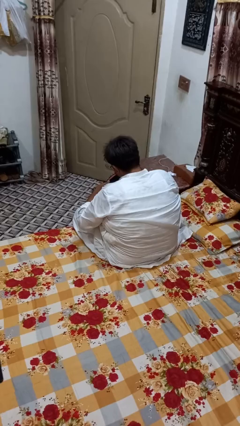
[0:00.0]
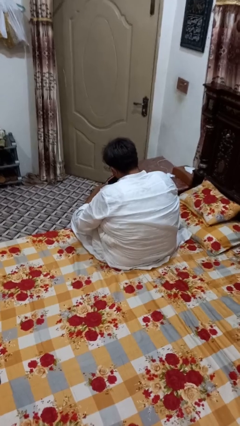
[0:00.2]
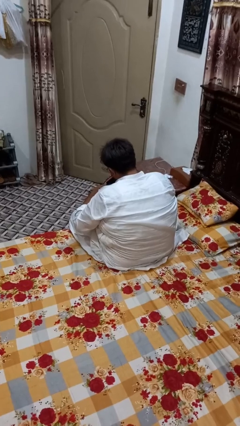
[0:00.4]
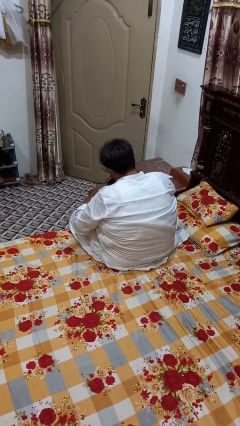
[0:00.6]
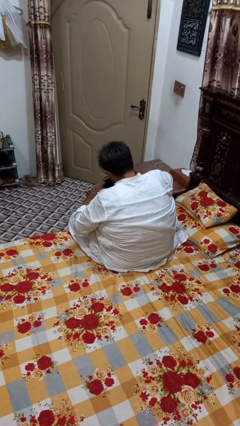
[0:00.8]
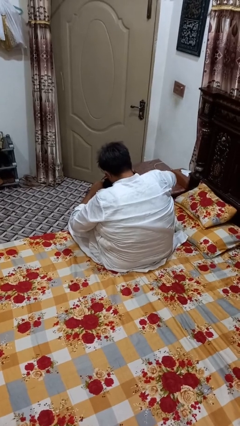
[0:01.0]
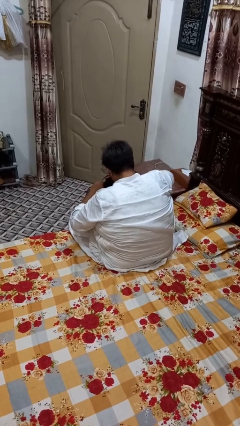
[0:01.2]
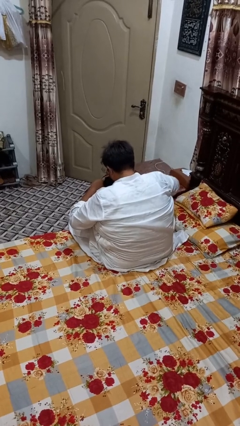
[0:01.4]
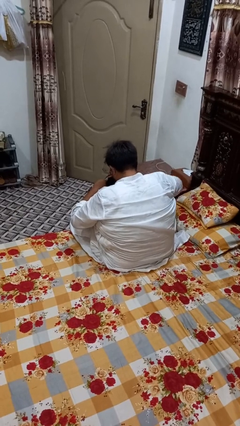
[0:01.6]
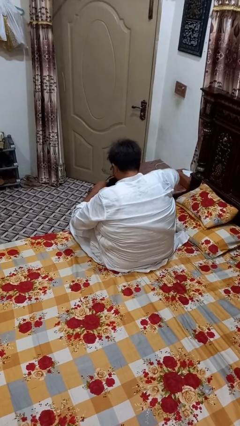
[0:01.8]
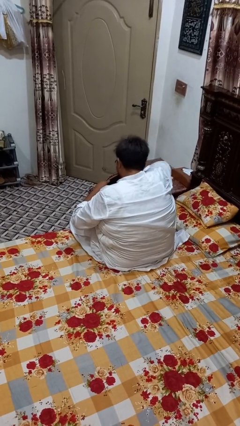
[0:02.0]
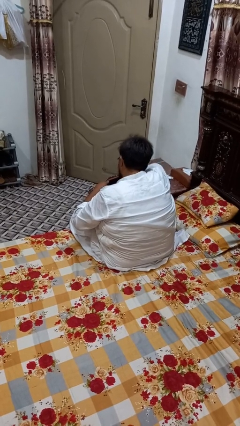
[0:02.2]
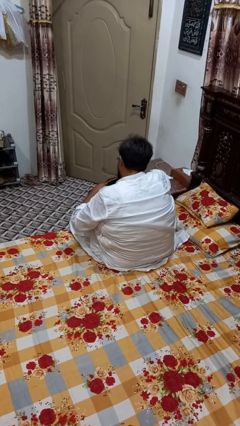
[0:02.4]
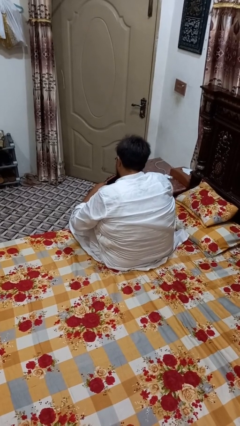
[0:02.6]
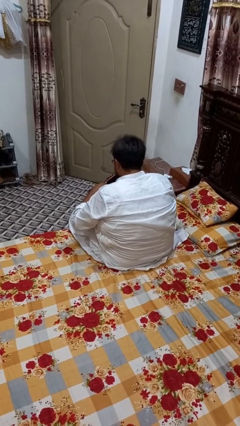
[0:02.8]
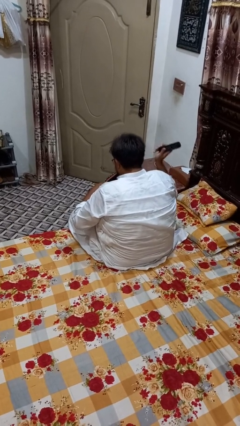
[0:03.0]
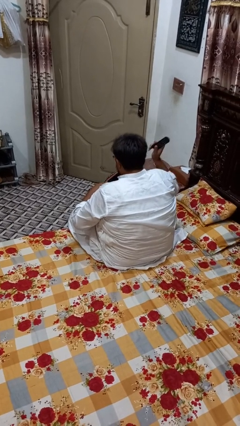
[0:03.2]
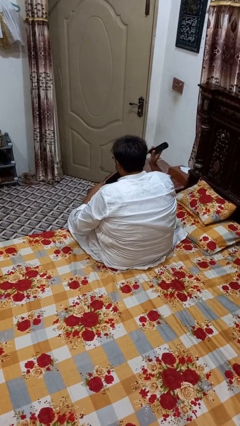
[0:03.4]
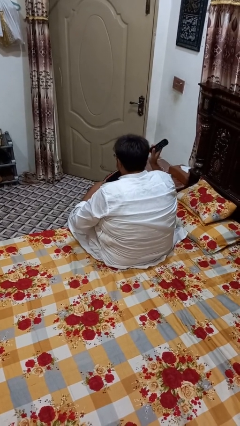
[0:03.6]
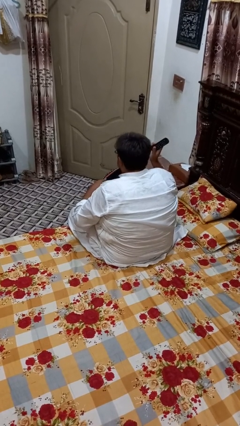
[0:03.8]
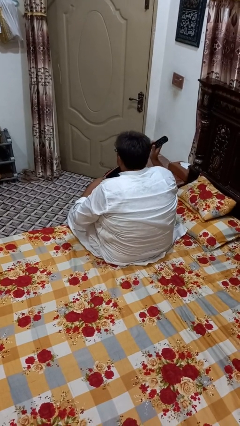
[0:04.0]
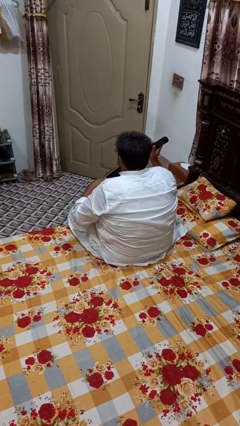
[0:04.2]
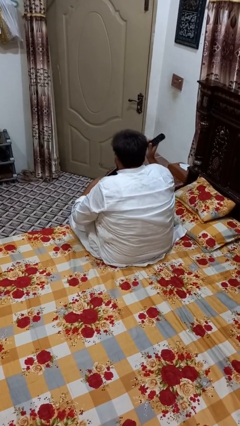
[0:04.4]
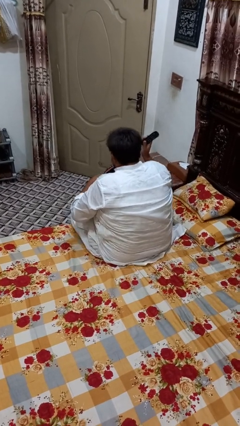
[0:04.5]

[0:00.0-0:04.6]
person takes object from bag

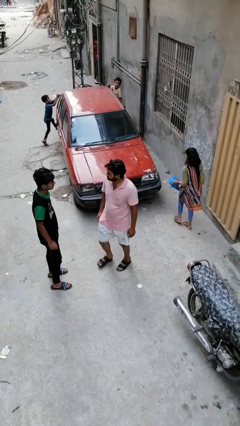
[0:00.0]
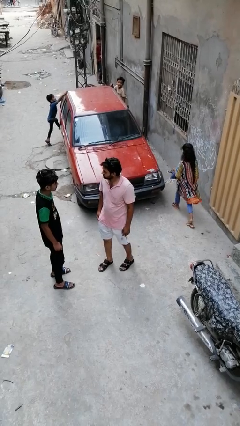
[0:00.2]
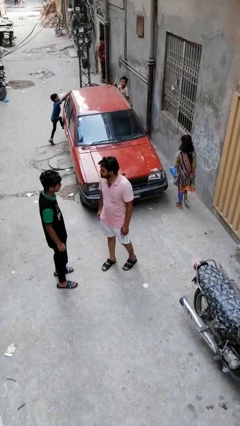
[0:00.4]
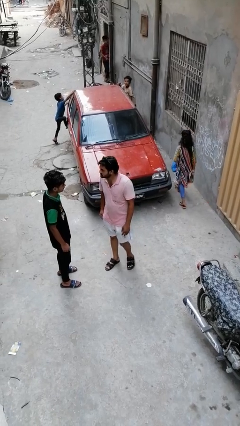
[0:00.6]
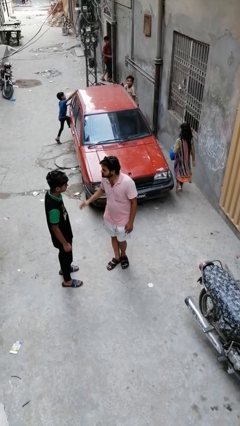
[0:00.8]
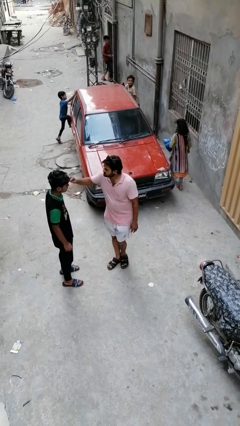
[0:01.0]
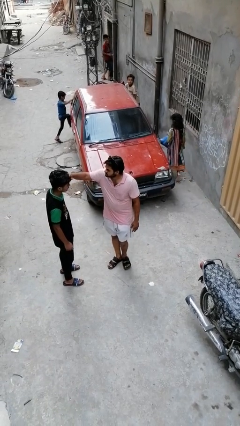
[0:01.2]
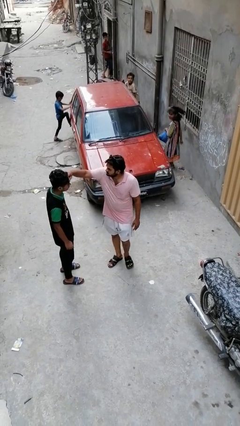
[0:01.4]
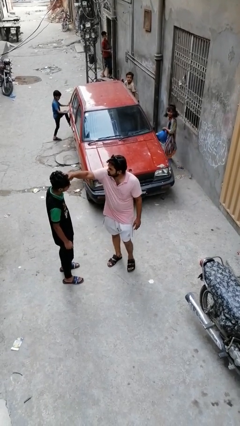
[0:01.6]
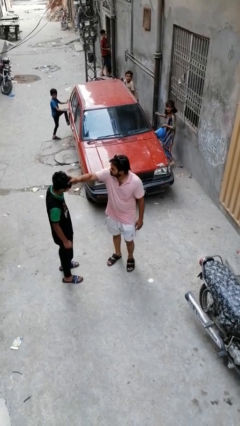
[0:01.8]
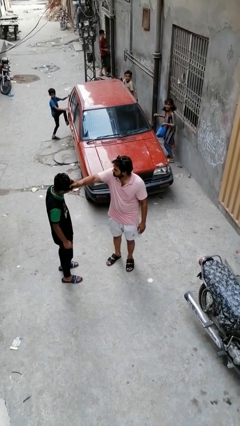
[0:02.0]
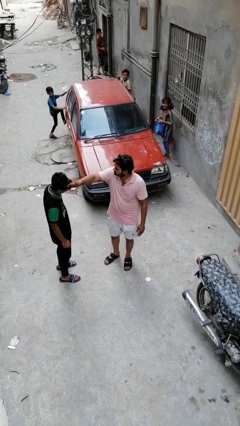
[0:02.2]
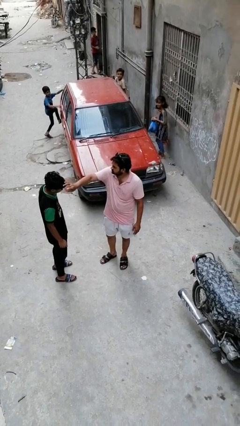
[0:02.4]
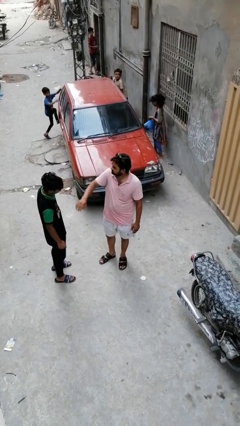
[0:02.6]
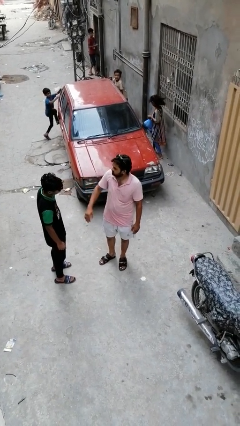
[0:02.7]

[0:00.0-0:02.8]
person grabs person by hair

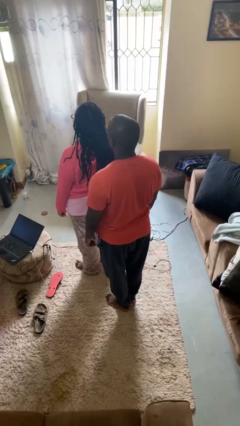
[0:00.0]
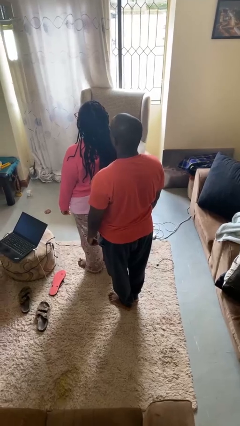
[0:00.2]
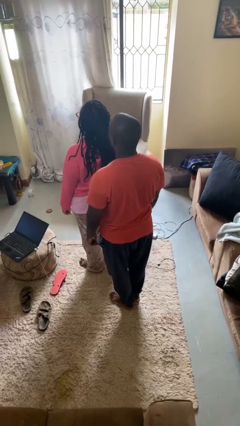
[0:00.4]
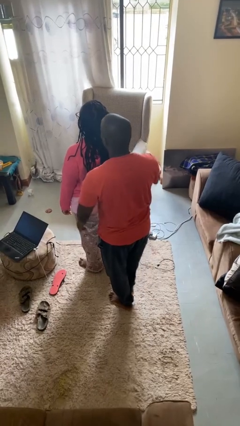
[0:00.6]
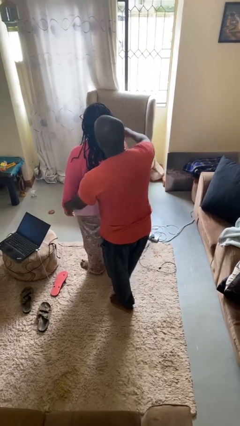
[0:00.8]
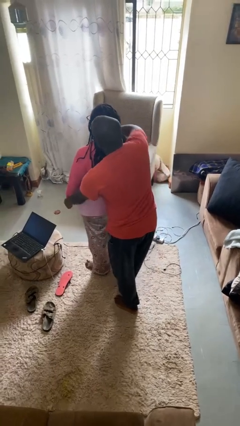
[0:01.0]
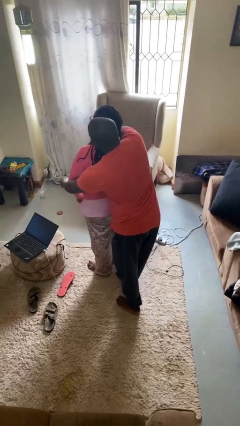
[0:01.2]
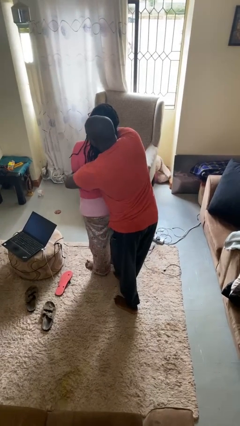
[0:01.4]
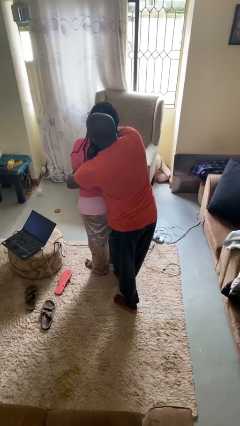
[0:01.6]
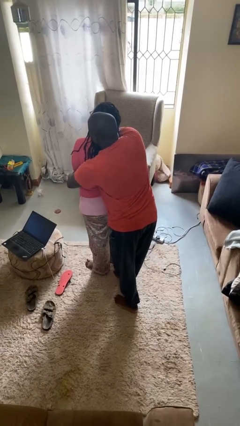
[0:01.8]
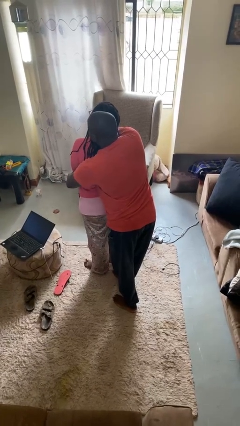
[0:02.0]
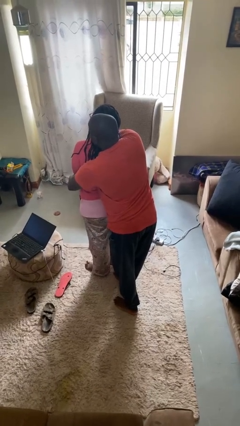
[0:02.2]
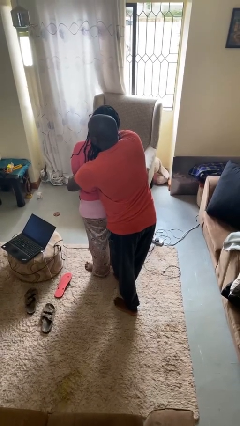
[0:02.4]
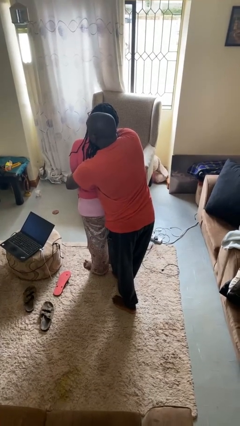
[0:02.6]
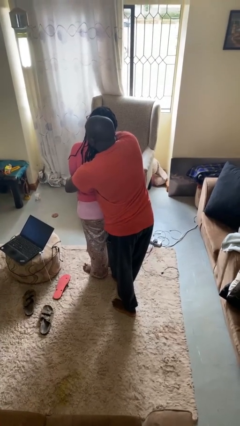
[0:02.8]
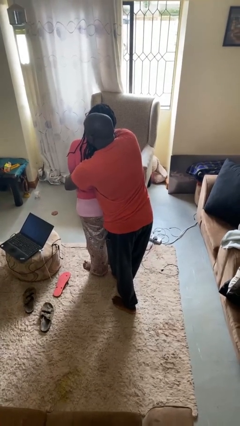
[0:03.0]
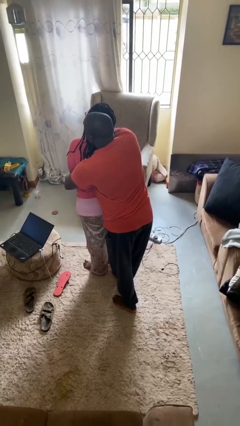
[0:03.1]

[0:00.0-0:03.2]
person hugs person from behind

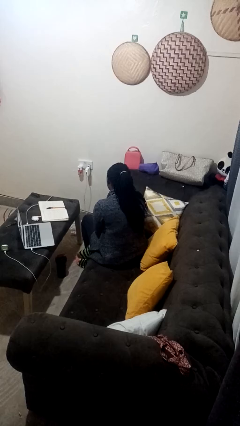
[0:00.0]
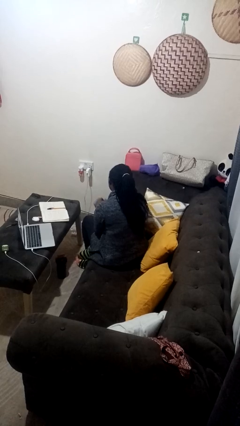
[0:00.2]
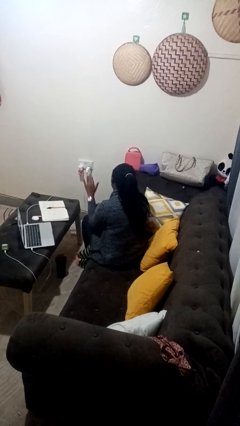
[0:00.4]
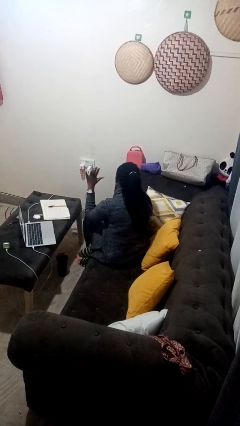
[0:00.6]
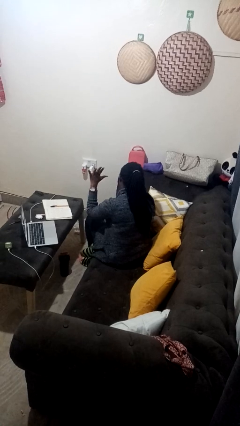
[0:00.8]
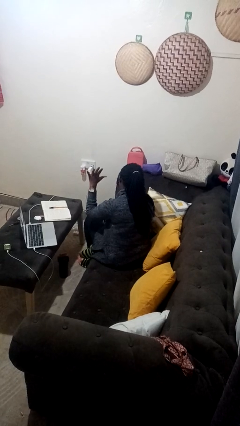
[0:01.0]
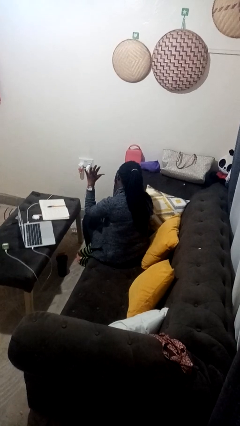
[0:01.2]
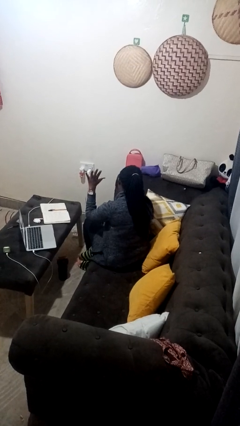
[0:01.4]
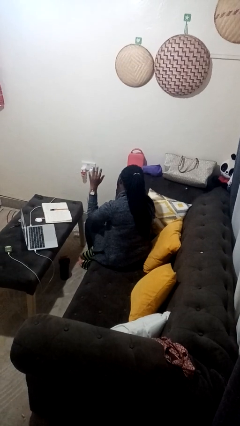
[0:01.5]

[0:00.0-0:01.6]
person gestures number five

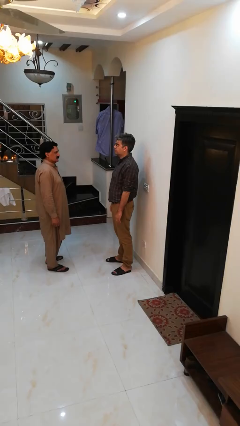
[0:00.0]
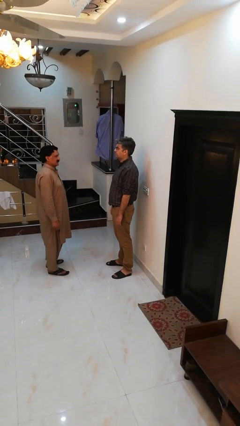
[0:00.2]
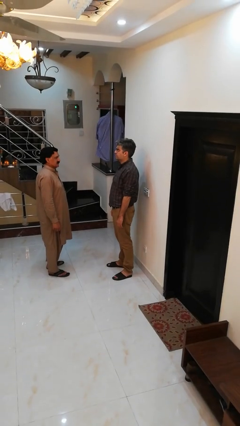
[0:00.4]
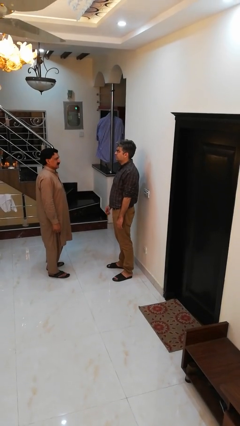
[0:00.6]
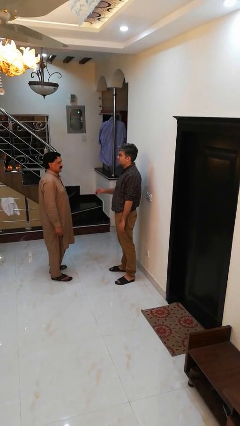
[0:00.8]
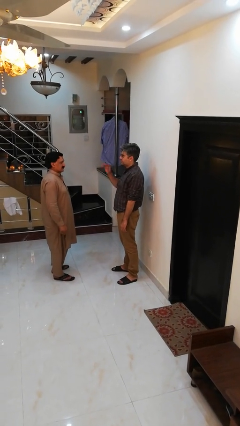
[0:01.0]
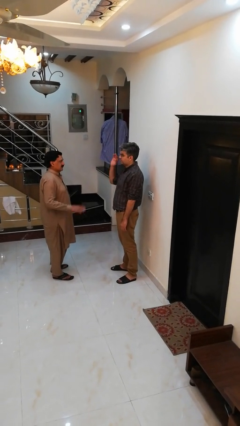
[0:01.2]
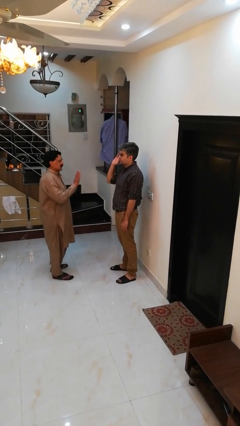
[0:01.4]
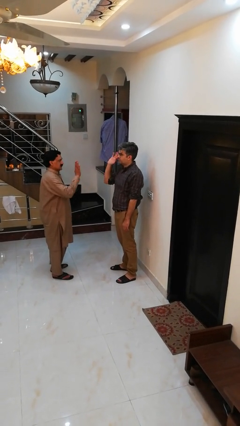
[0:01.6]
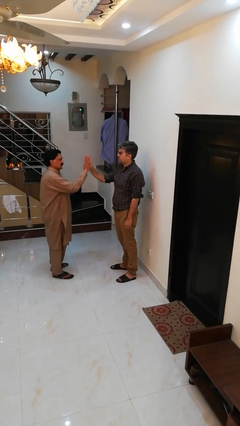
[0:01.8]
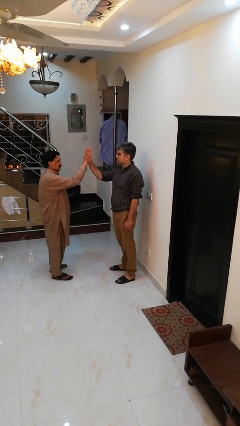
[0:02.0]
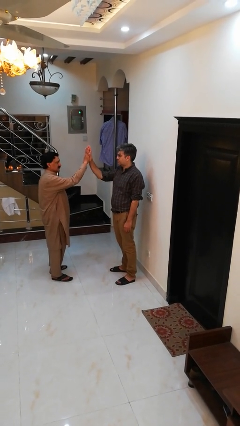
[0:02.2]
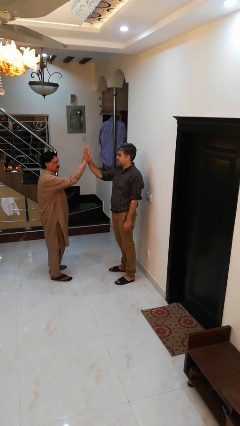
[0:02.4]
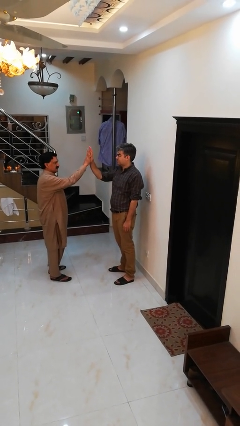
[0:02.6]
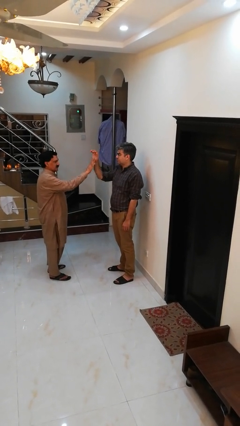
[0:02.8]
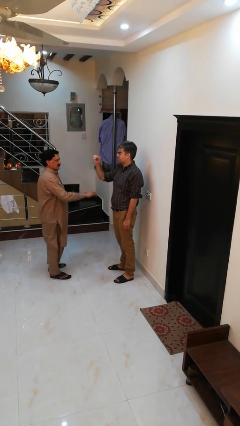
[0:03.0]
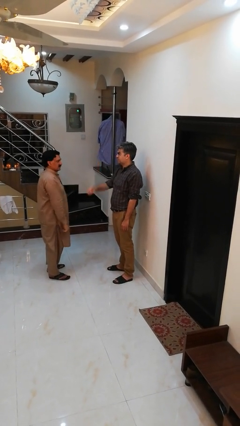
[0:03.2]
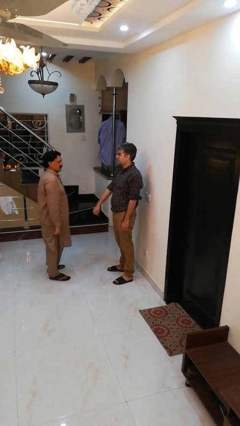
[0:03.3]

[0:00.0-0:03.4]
person highfives hand

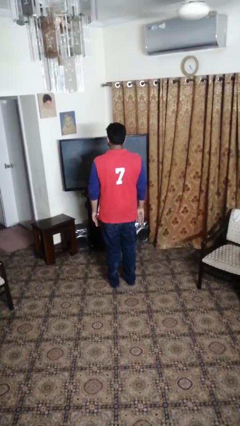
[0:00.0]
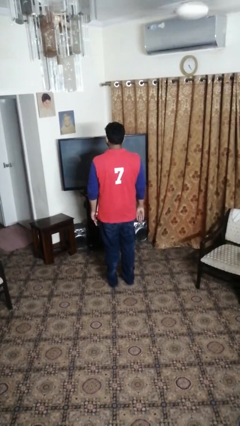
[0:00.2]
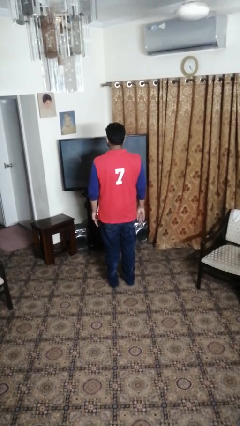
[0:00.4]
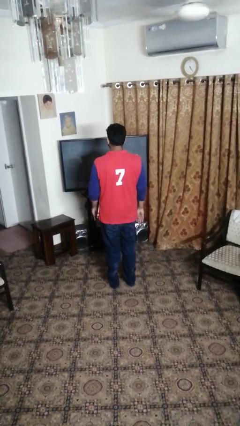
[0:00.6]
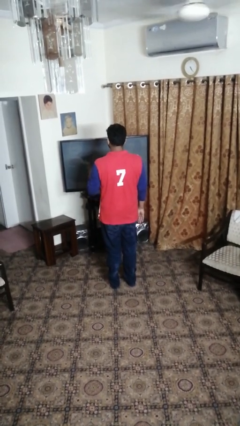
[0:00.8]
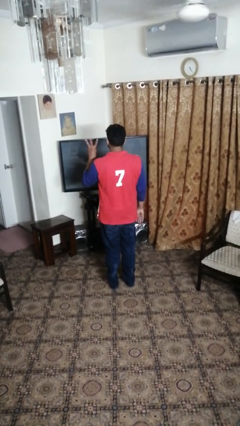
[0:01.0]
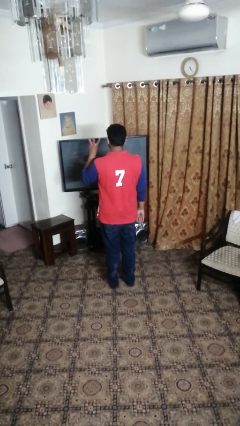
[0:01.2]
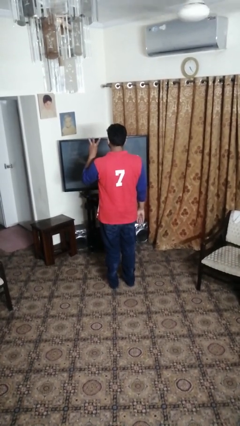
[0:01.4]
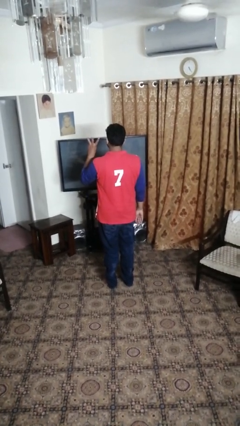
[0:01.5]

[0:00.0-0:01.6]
person gestures number three
